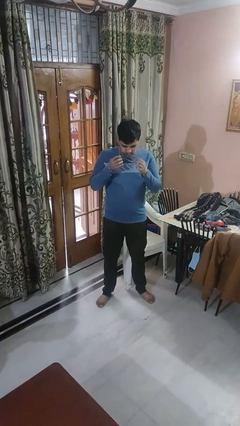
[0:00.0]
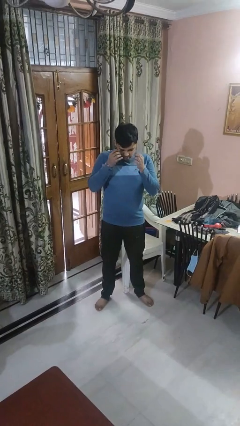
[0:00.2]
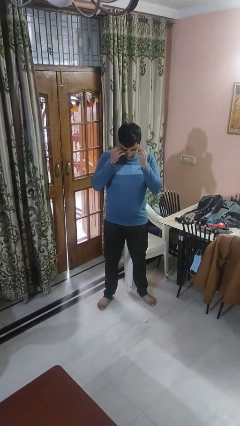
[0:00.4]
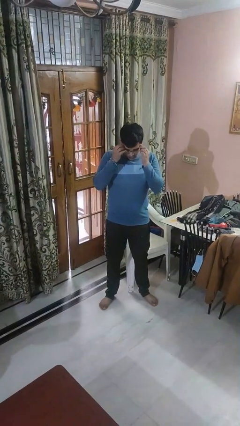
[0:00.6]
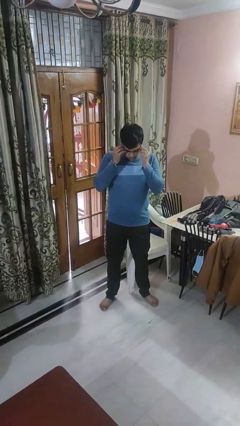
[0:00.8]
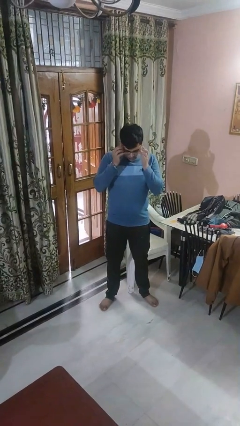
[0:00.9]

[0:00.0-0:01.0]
person puts on glasses

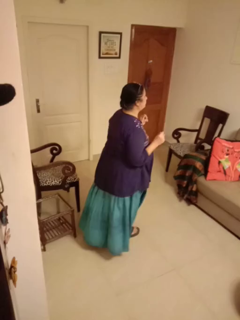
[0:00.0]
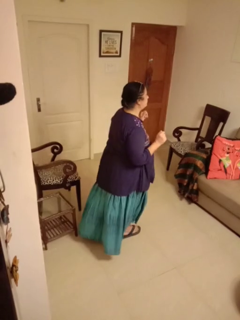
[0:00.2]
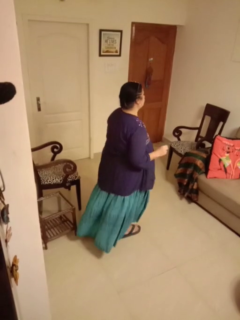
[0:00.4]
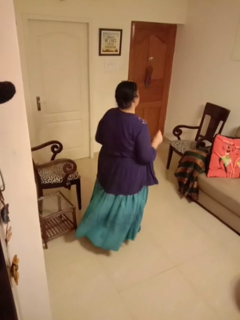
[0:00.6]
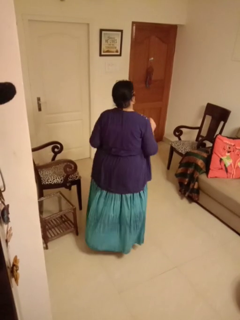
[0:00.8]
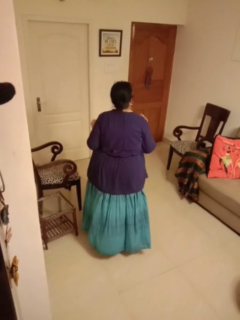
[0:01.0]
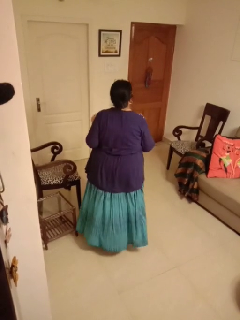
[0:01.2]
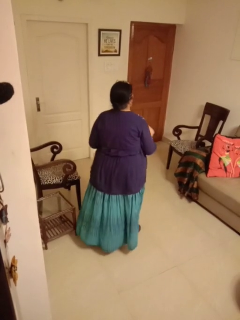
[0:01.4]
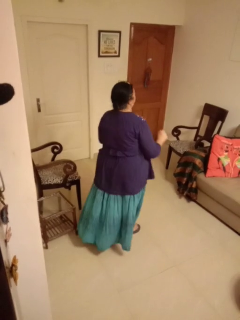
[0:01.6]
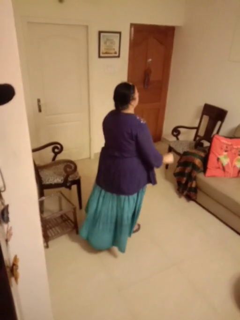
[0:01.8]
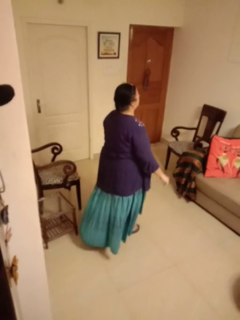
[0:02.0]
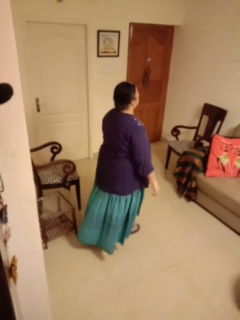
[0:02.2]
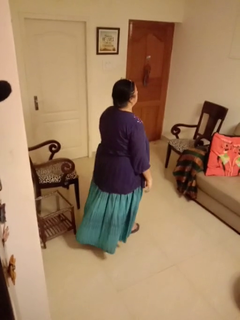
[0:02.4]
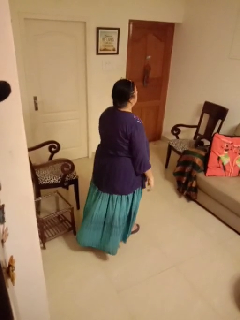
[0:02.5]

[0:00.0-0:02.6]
person dances in place

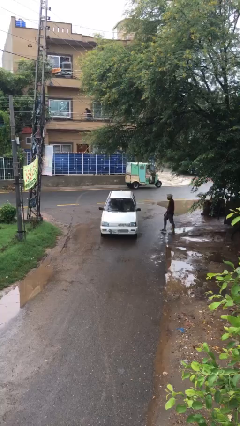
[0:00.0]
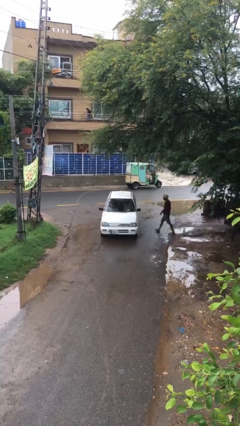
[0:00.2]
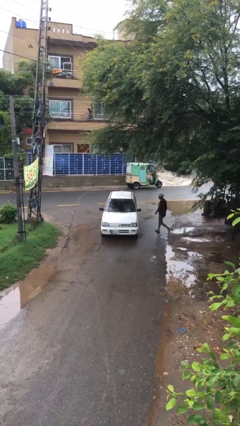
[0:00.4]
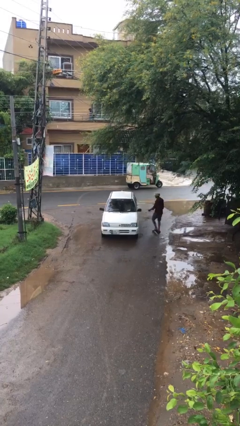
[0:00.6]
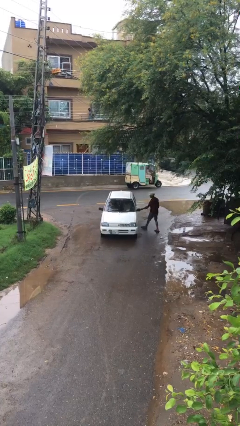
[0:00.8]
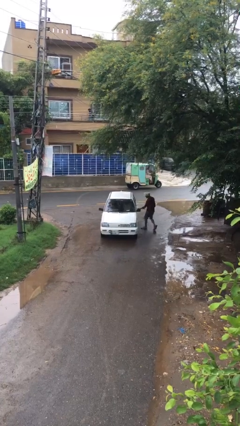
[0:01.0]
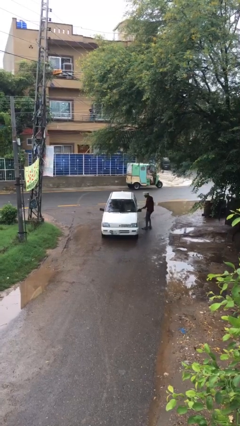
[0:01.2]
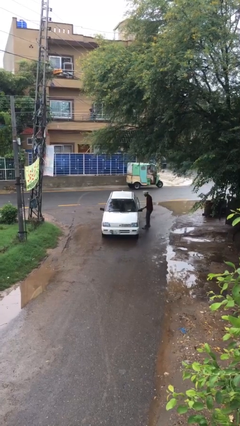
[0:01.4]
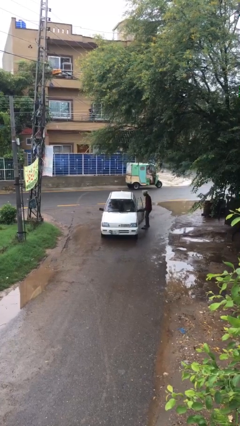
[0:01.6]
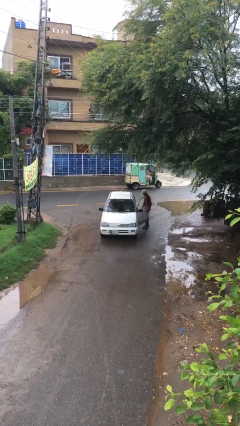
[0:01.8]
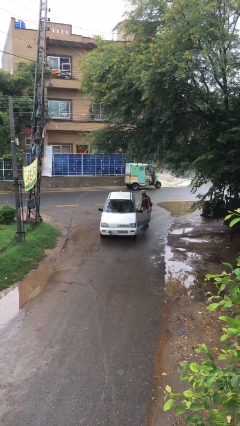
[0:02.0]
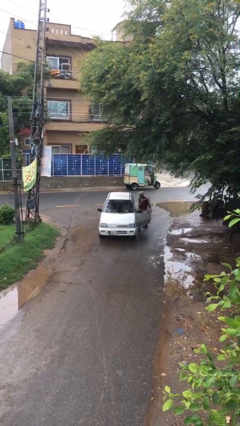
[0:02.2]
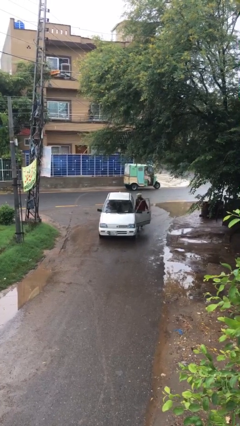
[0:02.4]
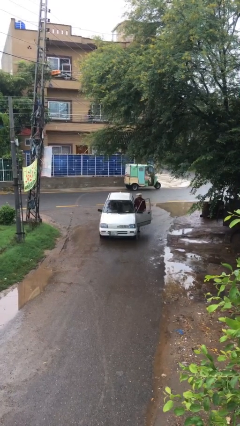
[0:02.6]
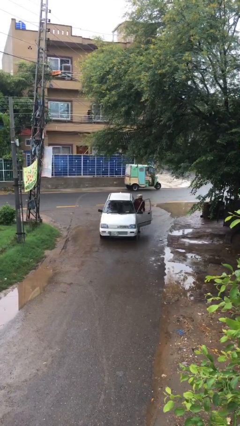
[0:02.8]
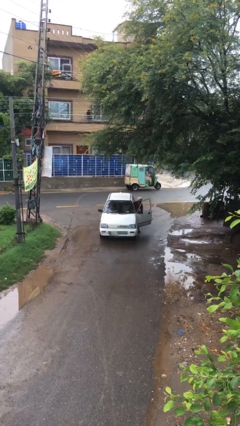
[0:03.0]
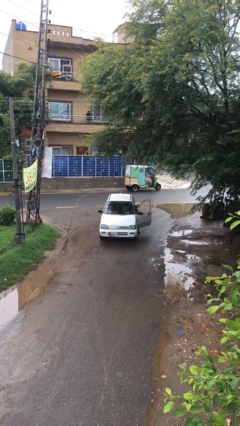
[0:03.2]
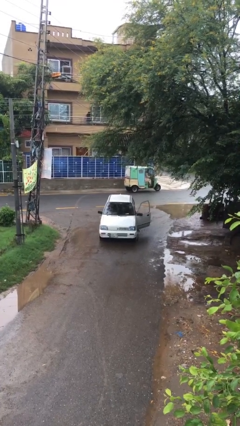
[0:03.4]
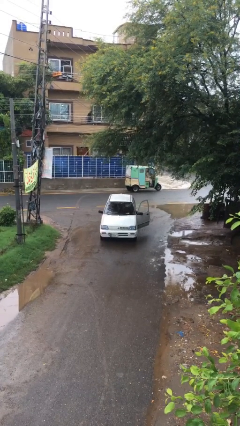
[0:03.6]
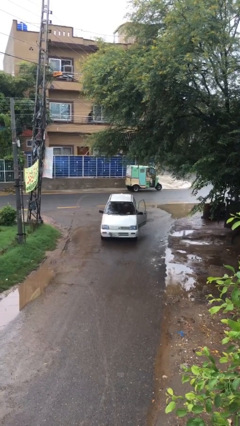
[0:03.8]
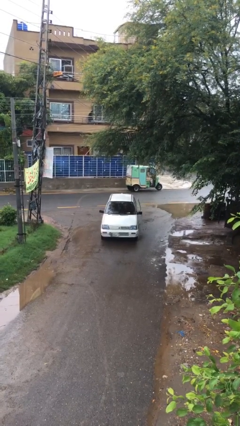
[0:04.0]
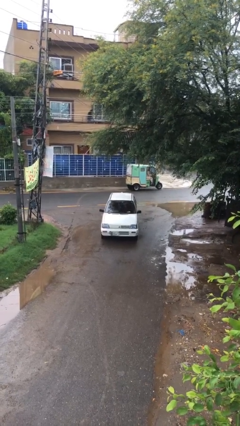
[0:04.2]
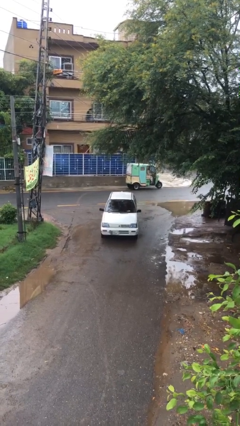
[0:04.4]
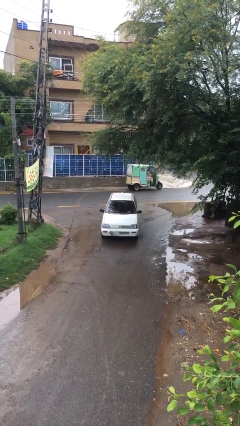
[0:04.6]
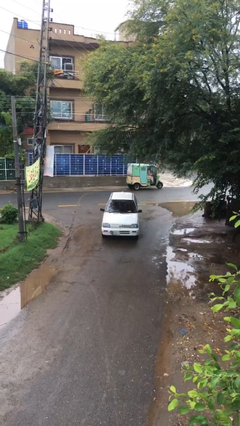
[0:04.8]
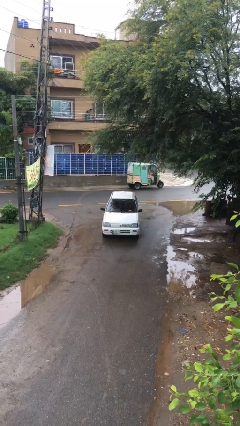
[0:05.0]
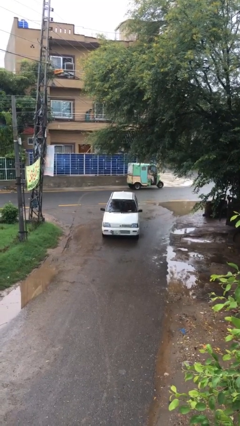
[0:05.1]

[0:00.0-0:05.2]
car picks up person

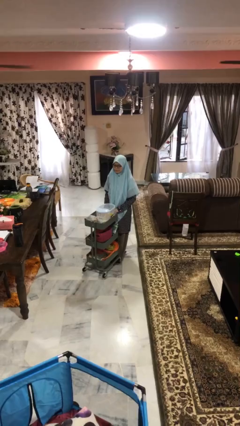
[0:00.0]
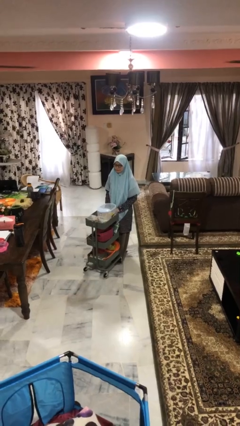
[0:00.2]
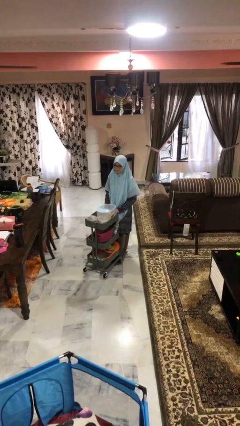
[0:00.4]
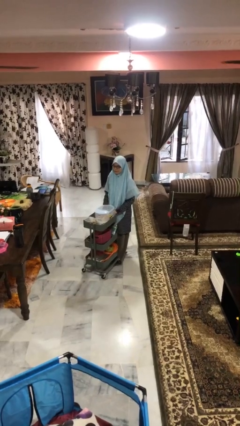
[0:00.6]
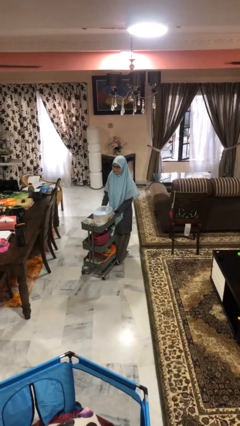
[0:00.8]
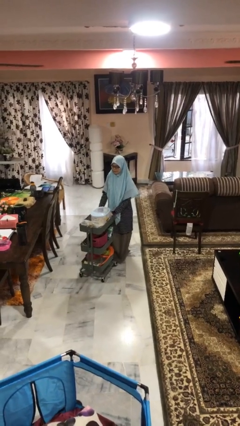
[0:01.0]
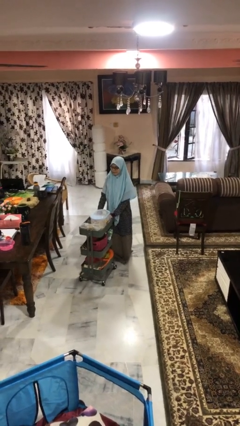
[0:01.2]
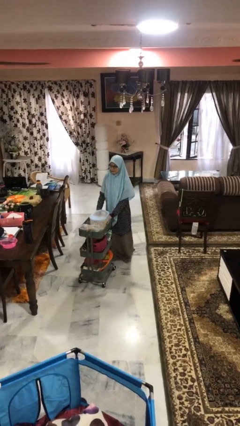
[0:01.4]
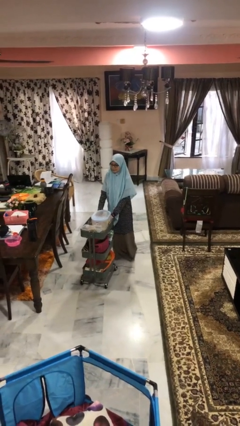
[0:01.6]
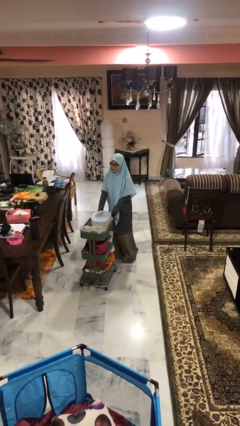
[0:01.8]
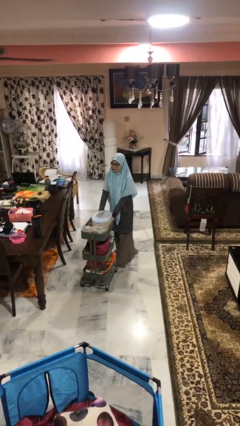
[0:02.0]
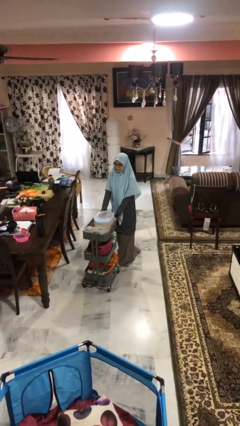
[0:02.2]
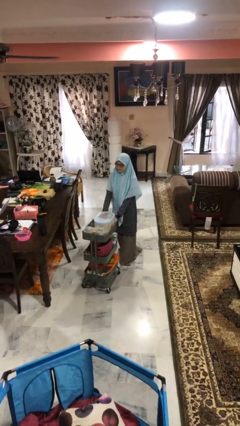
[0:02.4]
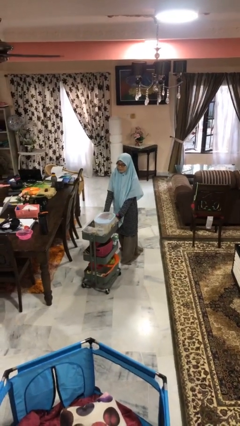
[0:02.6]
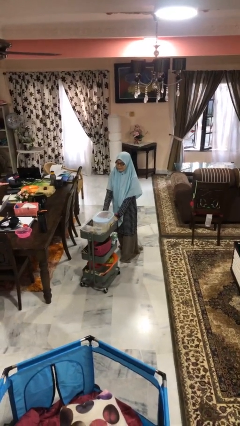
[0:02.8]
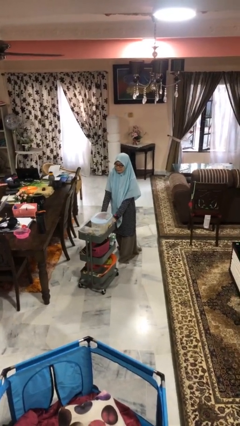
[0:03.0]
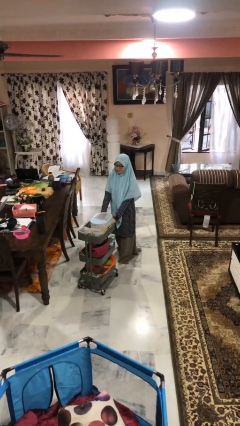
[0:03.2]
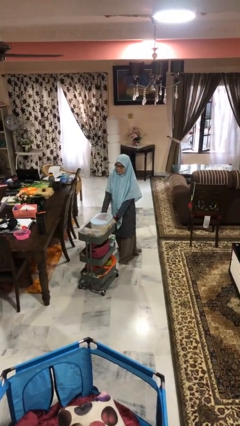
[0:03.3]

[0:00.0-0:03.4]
person pushes wheeled cart

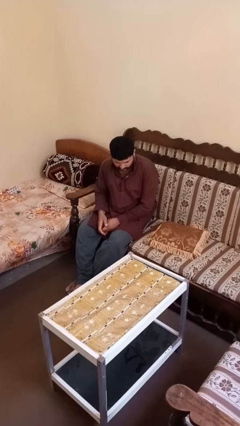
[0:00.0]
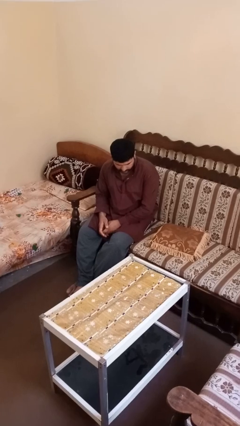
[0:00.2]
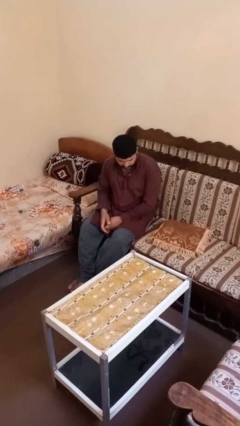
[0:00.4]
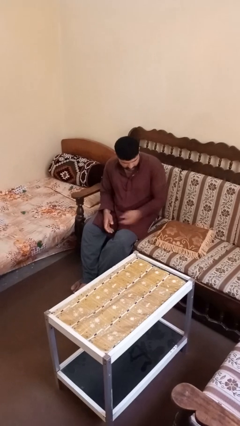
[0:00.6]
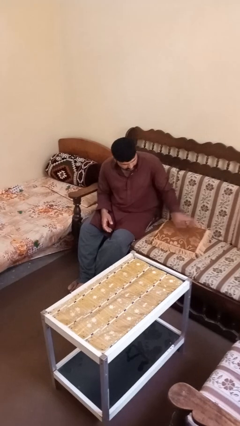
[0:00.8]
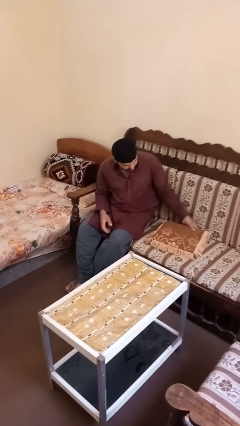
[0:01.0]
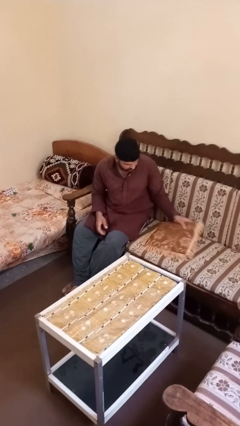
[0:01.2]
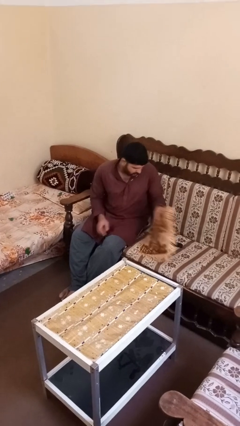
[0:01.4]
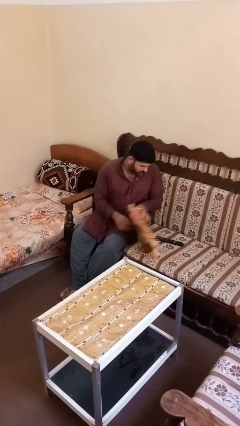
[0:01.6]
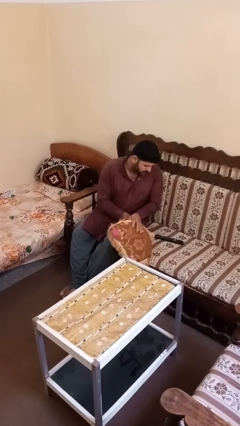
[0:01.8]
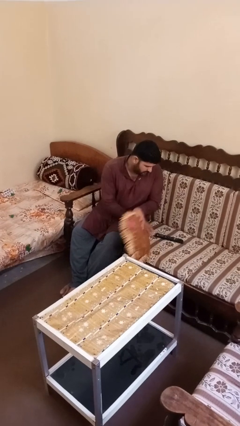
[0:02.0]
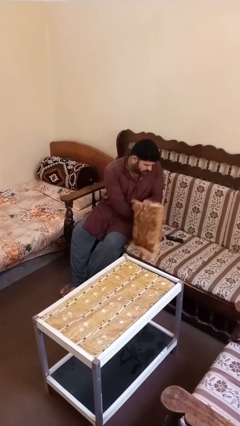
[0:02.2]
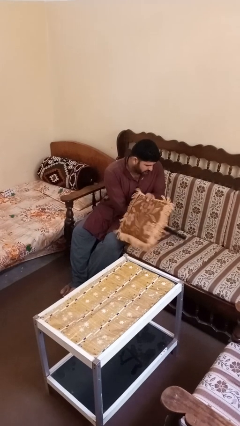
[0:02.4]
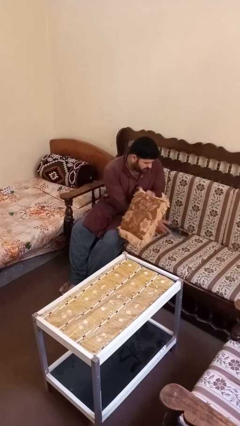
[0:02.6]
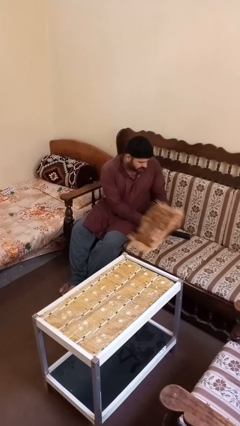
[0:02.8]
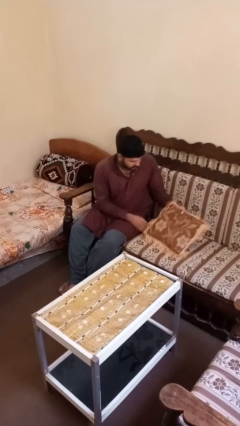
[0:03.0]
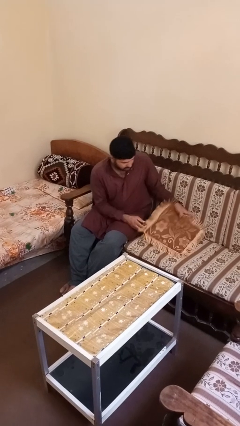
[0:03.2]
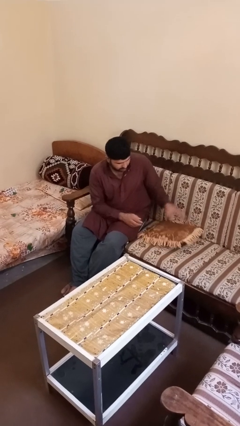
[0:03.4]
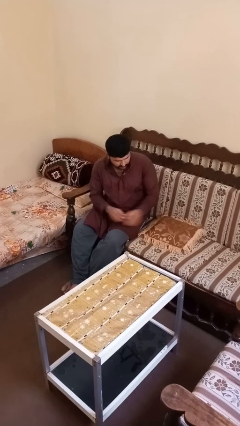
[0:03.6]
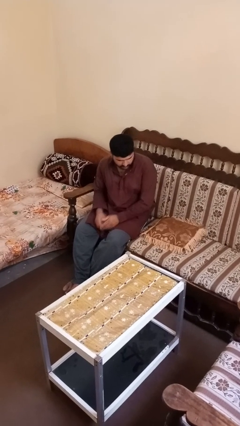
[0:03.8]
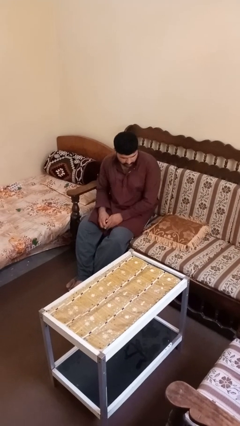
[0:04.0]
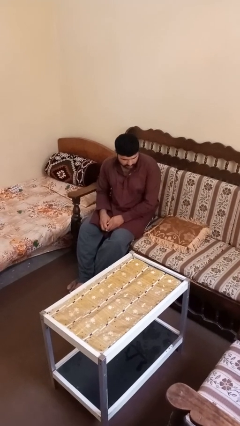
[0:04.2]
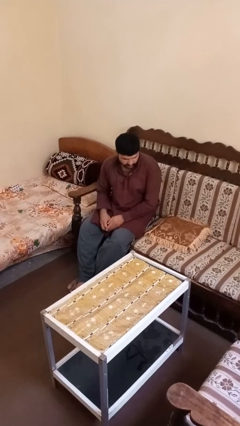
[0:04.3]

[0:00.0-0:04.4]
person searches in couch

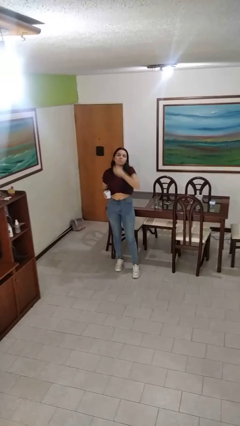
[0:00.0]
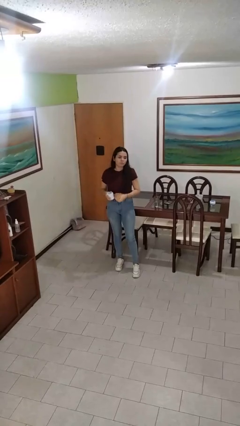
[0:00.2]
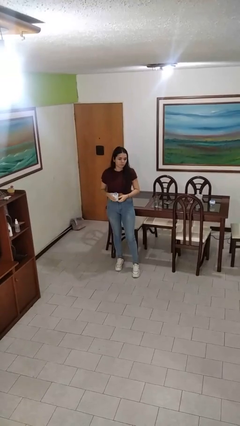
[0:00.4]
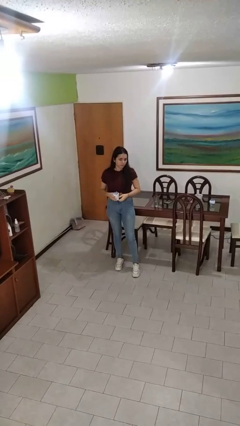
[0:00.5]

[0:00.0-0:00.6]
person takes medicine pills

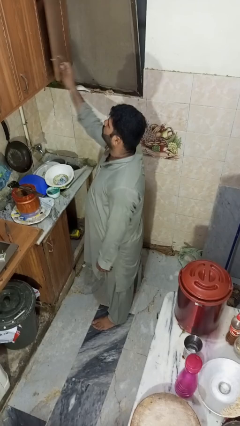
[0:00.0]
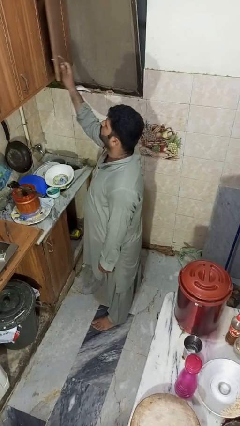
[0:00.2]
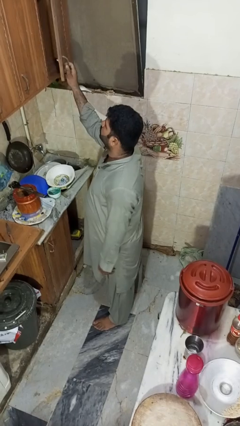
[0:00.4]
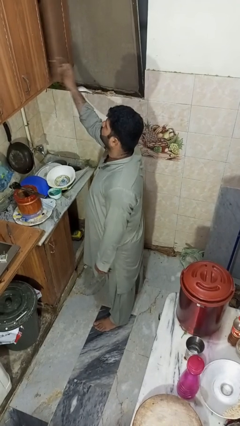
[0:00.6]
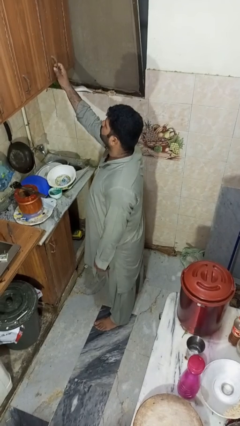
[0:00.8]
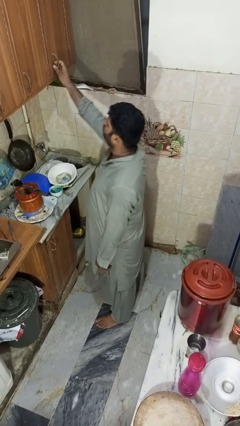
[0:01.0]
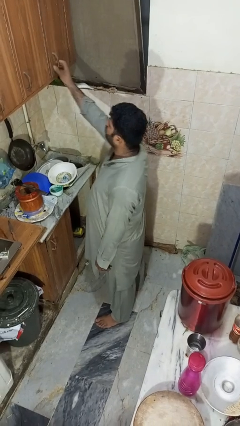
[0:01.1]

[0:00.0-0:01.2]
person closes cabinet
